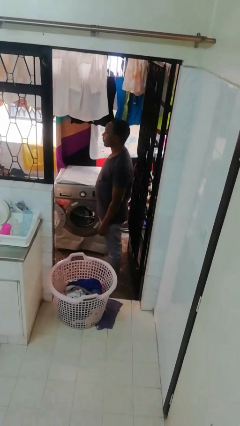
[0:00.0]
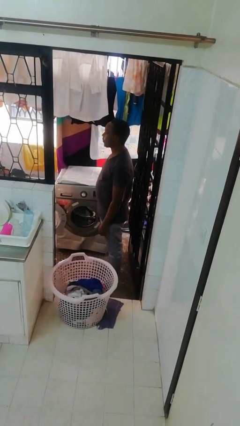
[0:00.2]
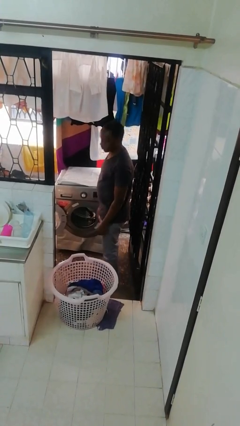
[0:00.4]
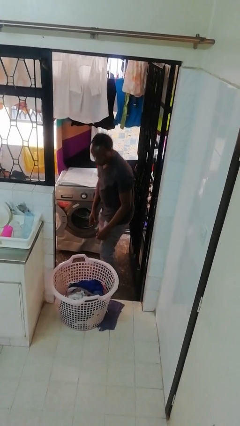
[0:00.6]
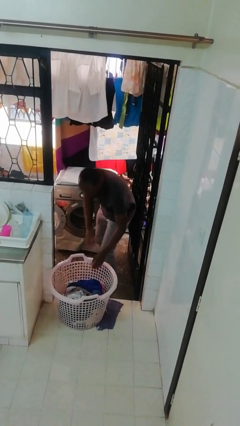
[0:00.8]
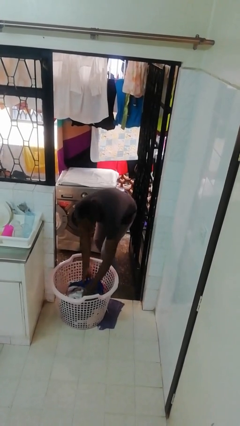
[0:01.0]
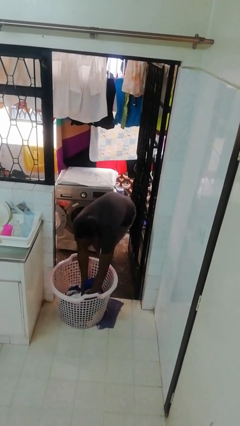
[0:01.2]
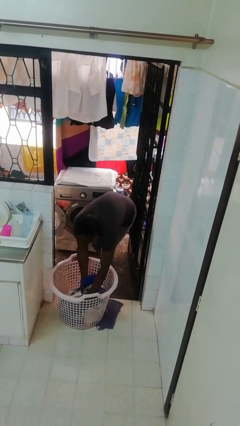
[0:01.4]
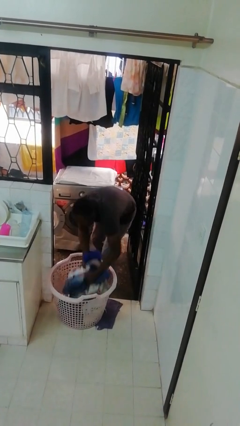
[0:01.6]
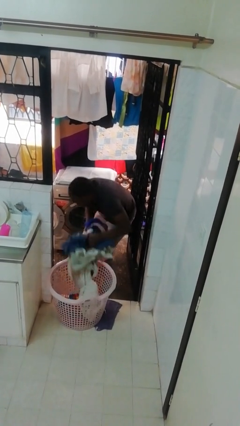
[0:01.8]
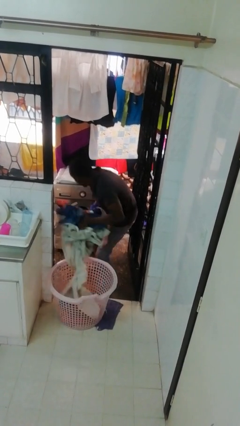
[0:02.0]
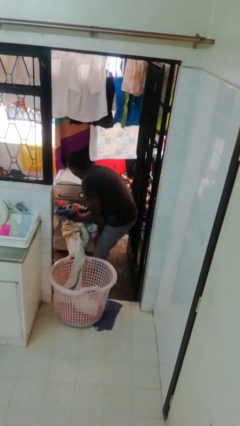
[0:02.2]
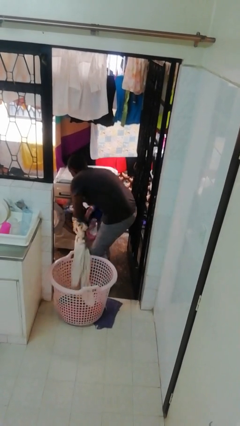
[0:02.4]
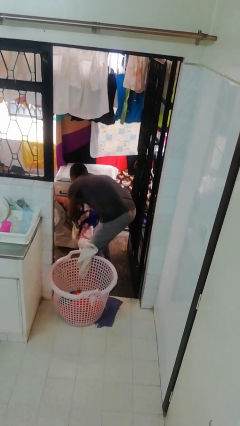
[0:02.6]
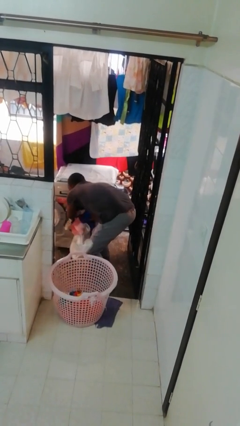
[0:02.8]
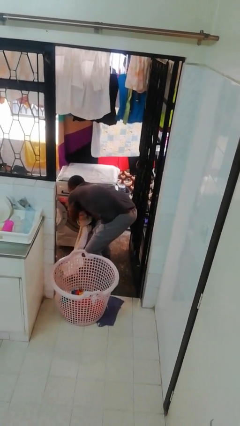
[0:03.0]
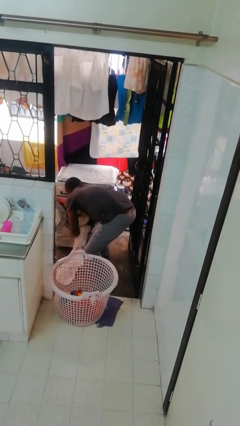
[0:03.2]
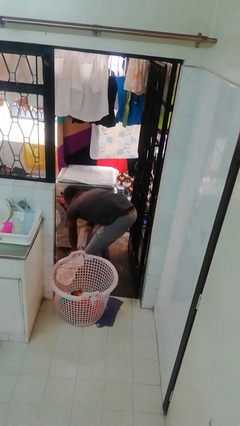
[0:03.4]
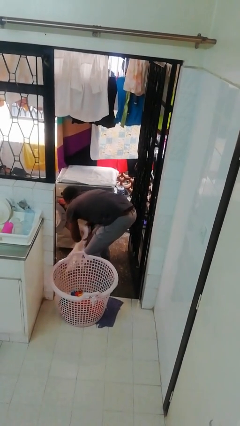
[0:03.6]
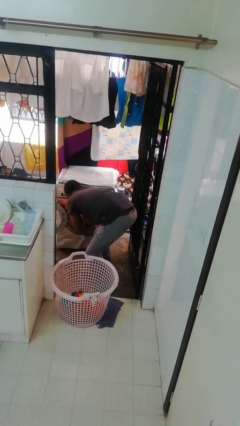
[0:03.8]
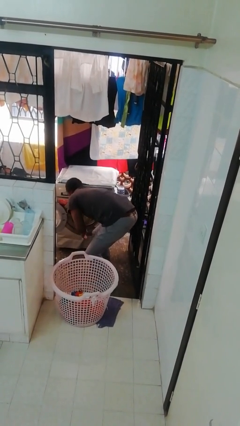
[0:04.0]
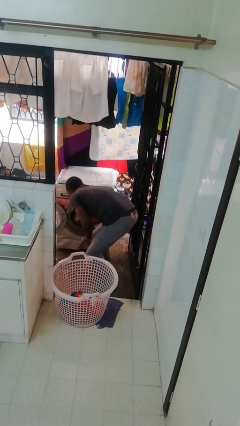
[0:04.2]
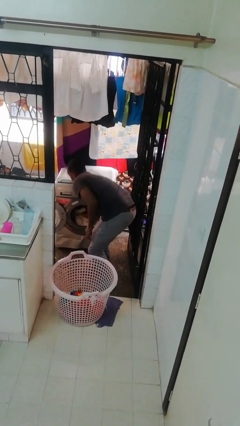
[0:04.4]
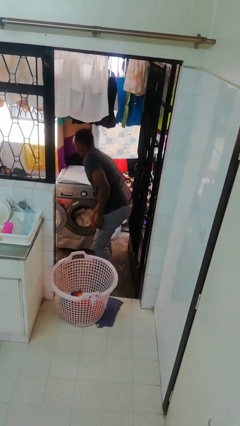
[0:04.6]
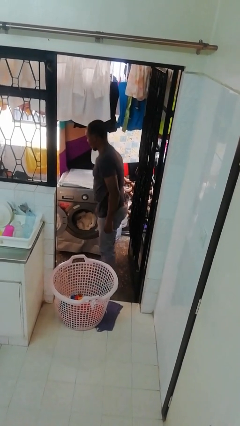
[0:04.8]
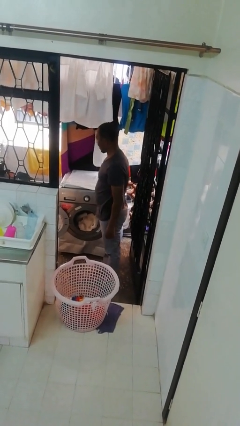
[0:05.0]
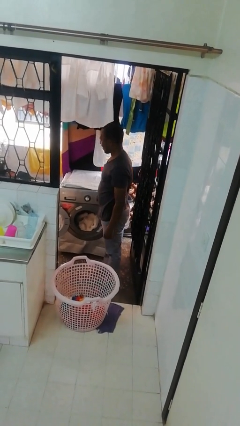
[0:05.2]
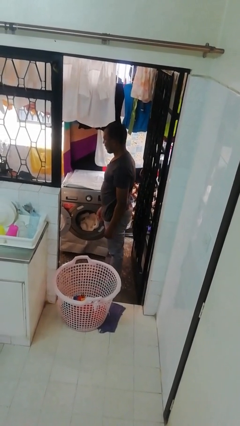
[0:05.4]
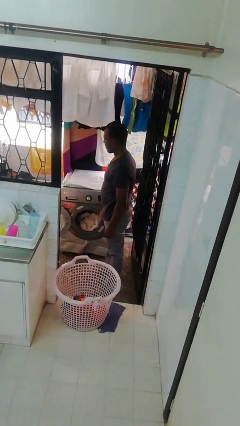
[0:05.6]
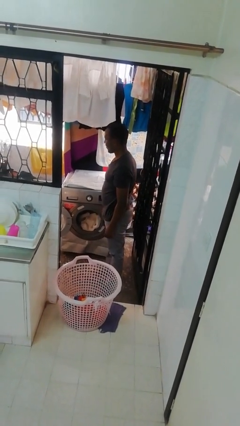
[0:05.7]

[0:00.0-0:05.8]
person loads clotheswasher

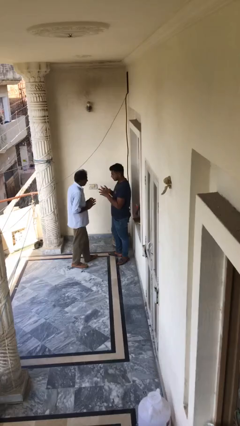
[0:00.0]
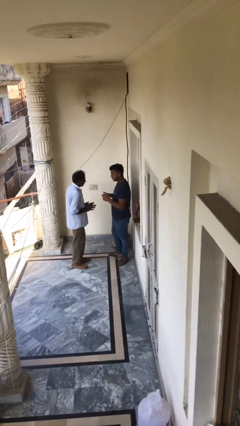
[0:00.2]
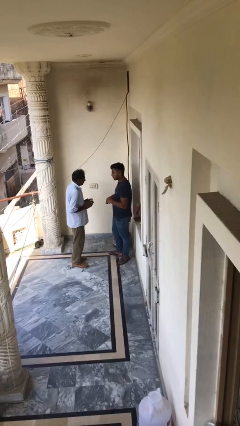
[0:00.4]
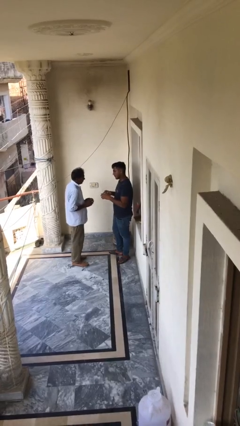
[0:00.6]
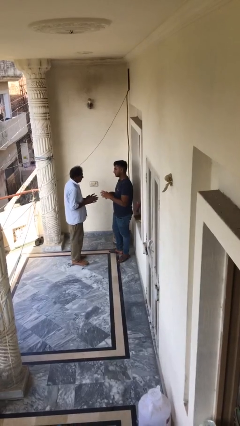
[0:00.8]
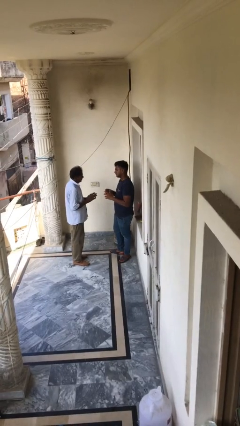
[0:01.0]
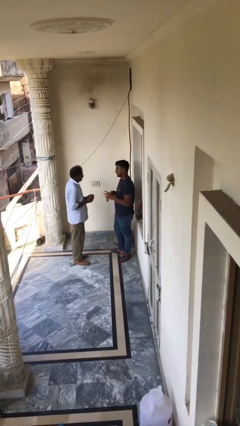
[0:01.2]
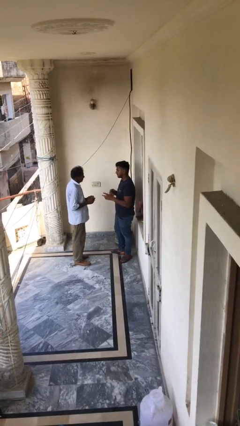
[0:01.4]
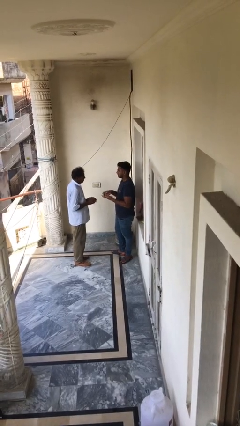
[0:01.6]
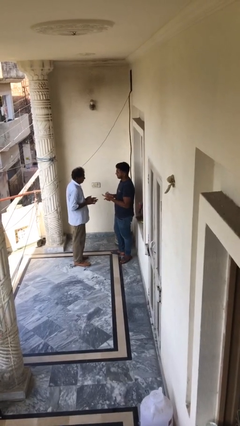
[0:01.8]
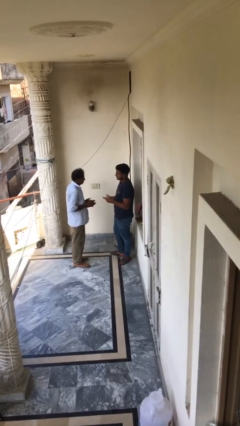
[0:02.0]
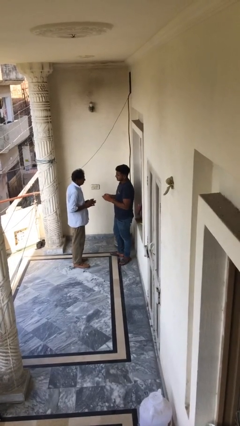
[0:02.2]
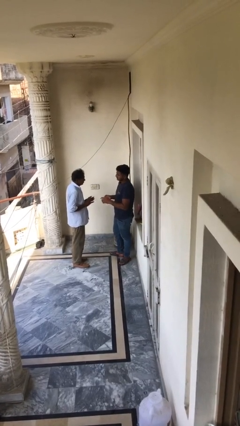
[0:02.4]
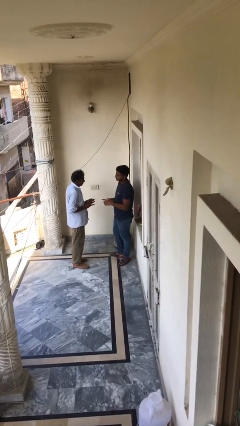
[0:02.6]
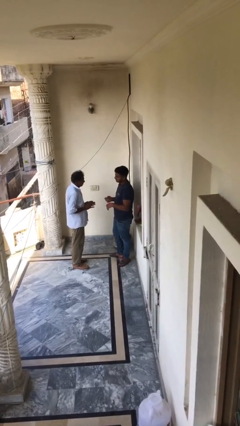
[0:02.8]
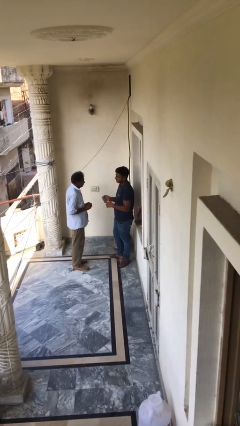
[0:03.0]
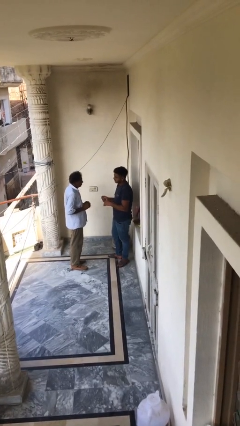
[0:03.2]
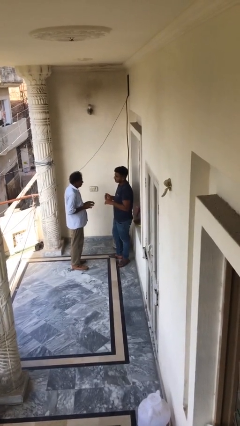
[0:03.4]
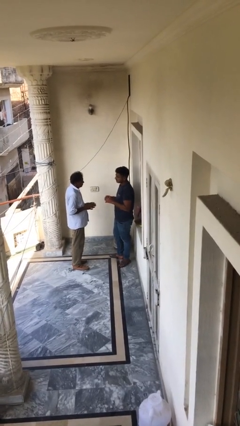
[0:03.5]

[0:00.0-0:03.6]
person talks to person

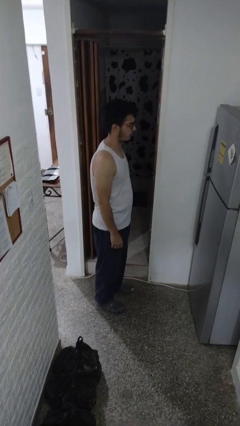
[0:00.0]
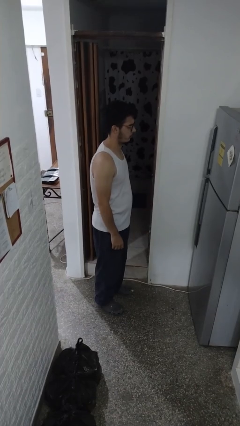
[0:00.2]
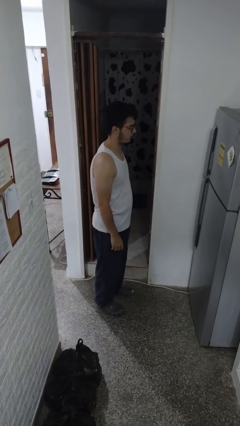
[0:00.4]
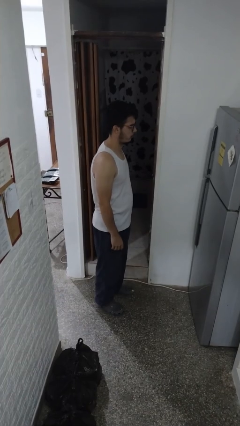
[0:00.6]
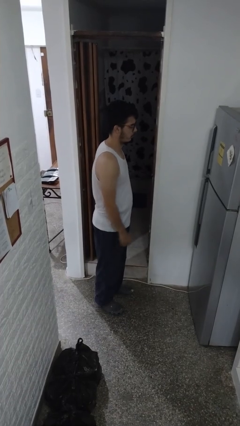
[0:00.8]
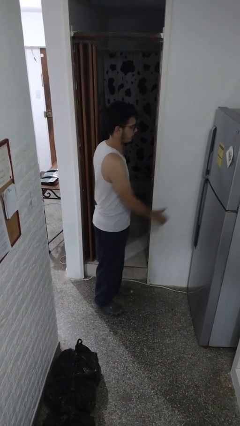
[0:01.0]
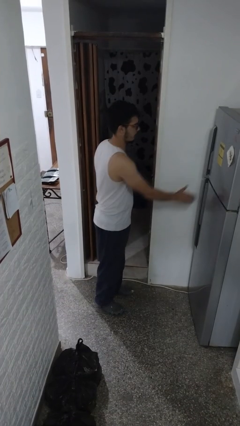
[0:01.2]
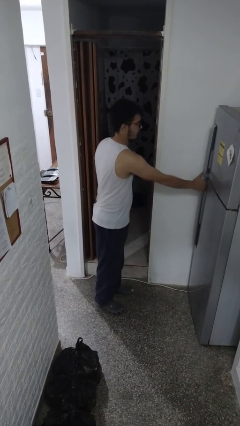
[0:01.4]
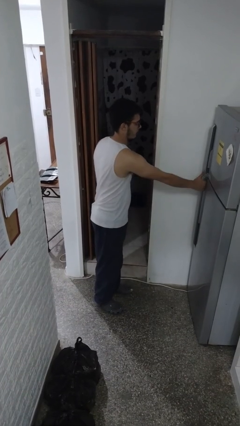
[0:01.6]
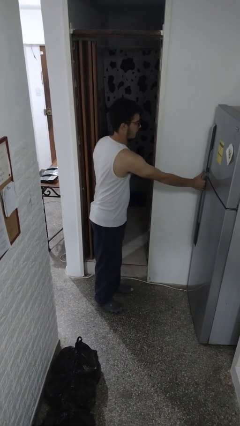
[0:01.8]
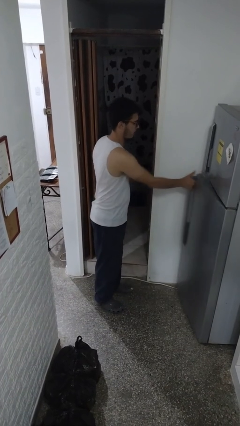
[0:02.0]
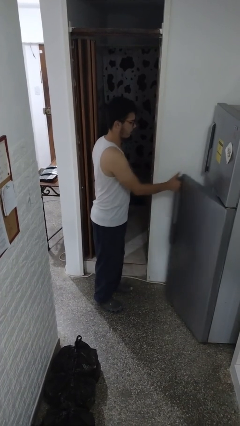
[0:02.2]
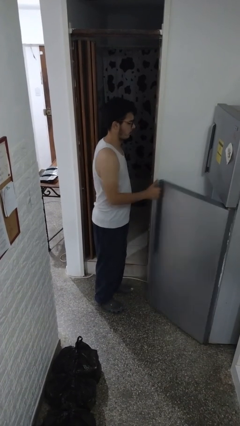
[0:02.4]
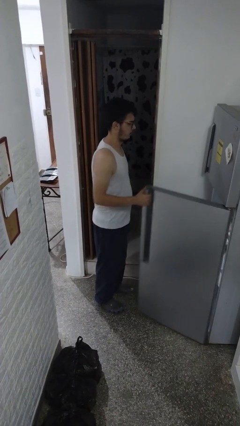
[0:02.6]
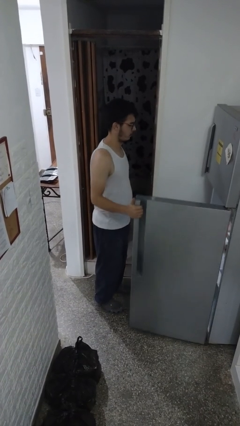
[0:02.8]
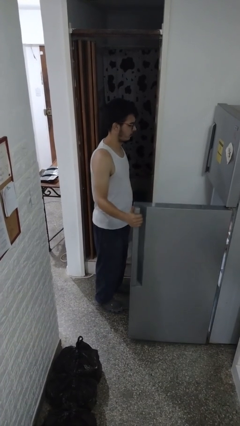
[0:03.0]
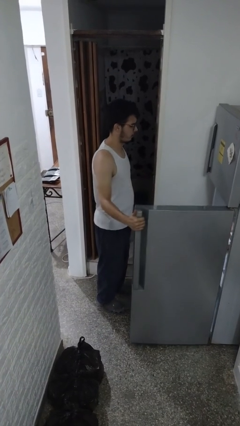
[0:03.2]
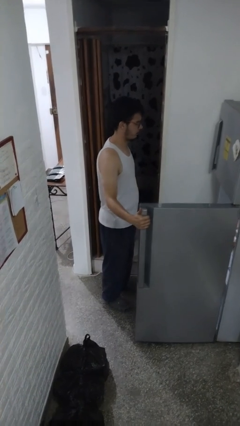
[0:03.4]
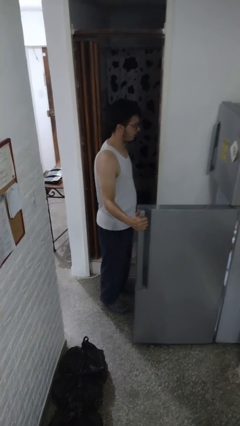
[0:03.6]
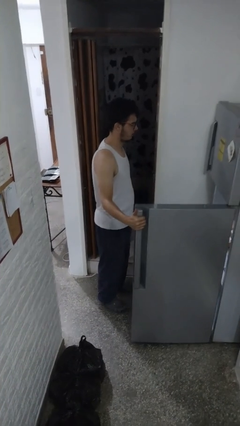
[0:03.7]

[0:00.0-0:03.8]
person opens refrigerator

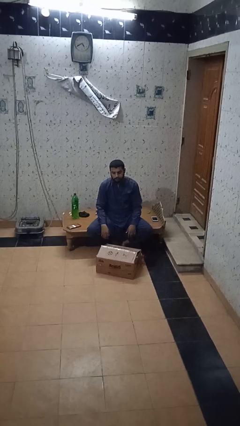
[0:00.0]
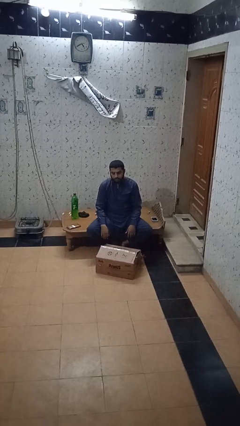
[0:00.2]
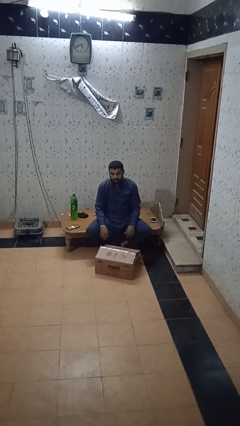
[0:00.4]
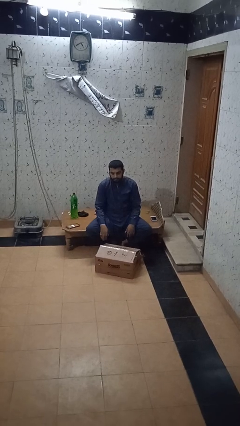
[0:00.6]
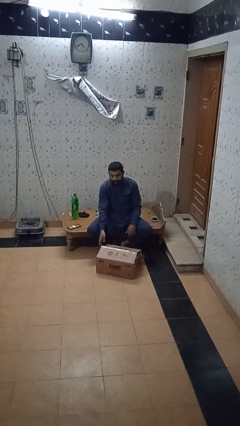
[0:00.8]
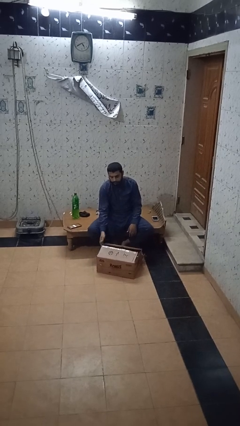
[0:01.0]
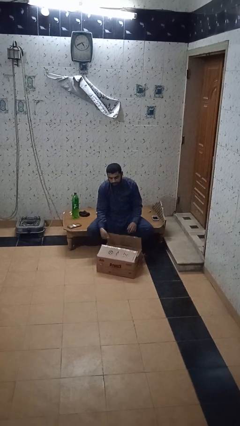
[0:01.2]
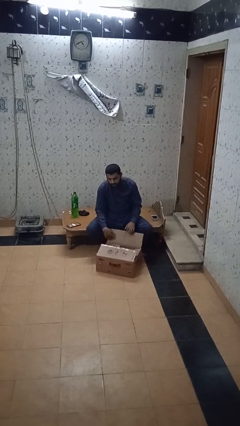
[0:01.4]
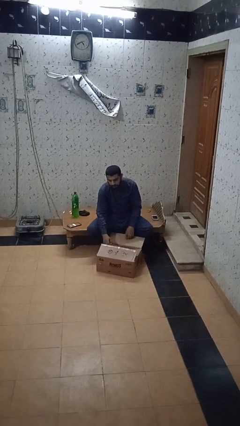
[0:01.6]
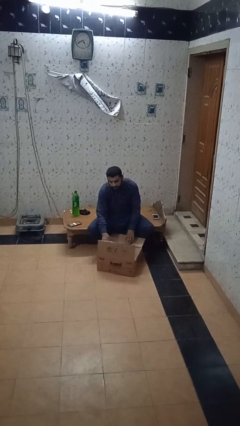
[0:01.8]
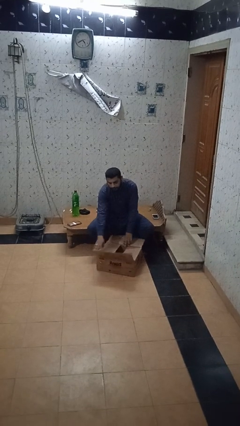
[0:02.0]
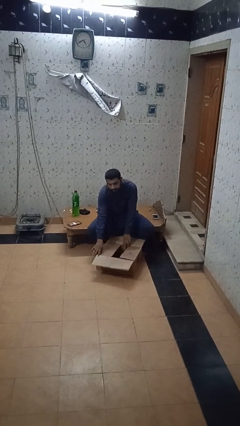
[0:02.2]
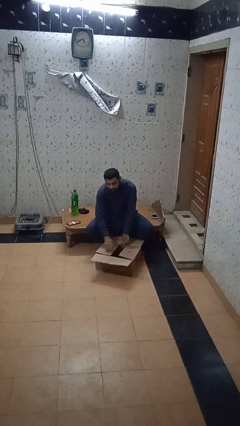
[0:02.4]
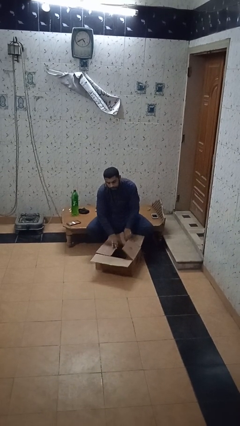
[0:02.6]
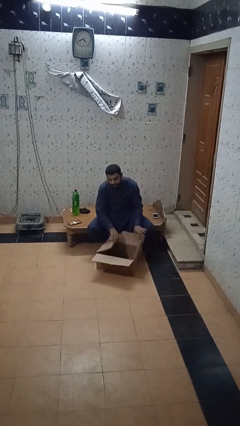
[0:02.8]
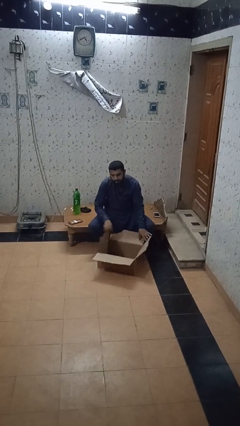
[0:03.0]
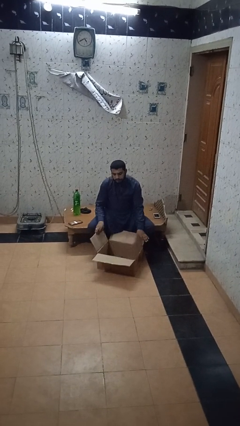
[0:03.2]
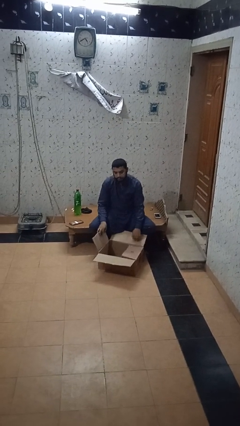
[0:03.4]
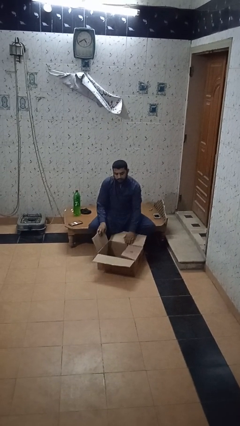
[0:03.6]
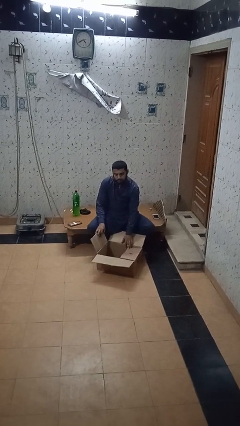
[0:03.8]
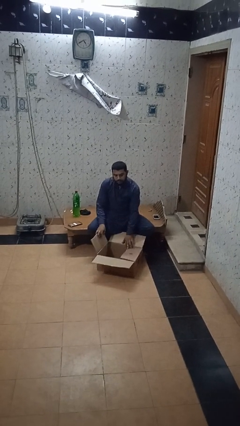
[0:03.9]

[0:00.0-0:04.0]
person opens box

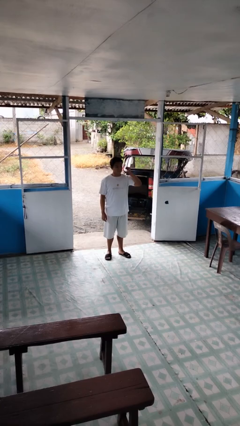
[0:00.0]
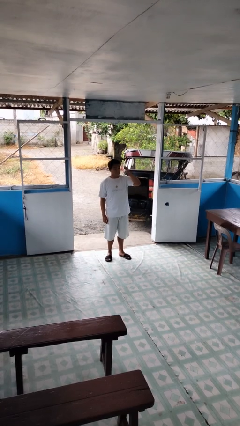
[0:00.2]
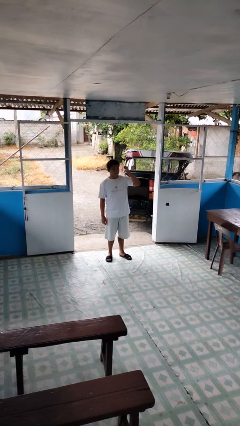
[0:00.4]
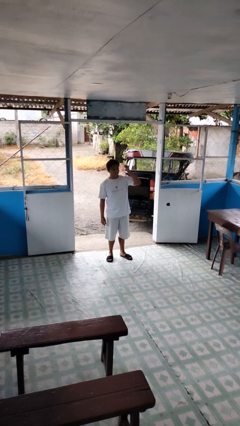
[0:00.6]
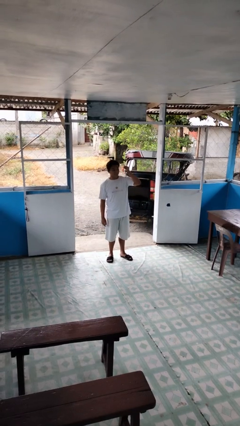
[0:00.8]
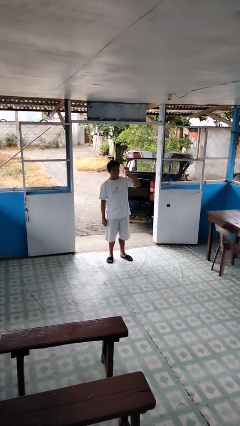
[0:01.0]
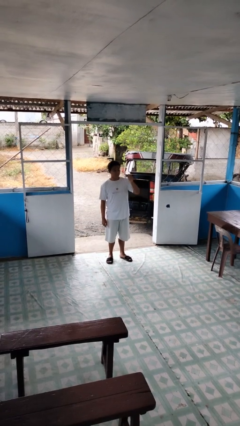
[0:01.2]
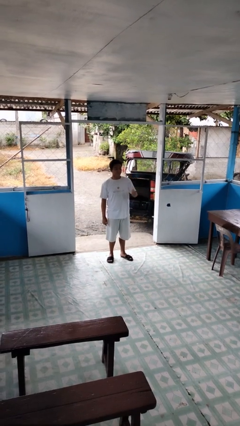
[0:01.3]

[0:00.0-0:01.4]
person gestures behind me
